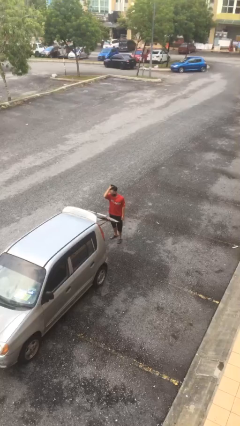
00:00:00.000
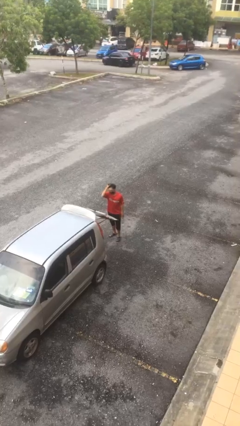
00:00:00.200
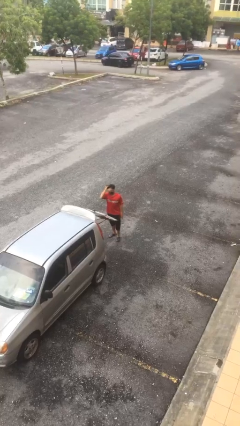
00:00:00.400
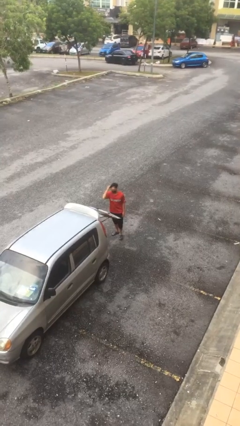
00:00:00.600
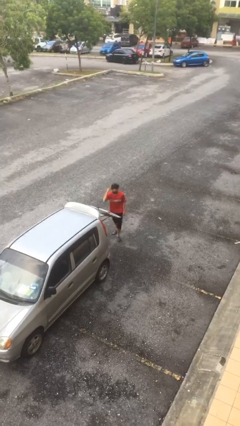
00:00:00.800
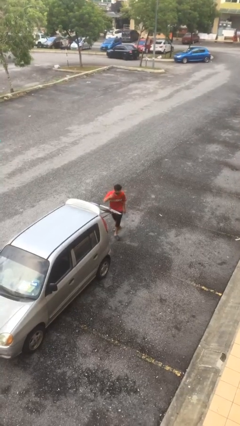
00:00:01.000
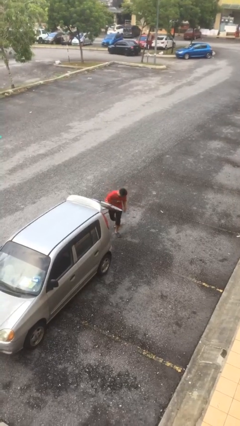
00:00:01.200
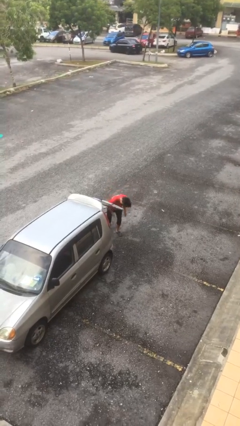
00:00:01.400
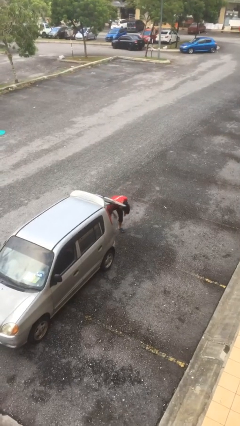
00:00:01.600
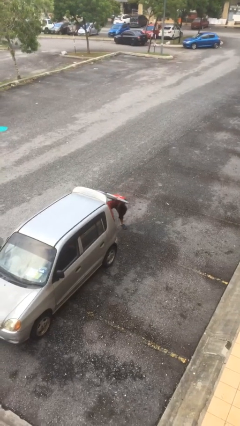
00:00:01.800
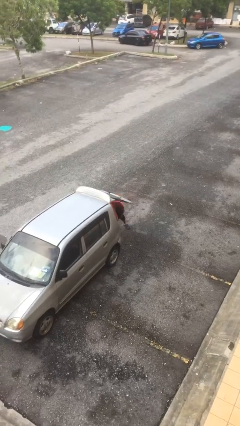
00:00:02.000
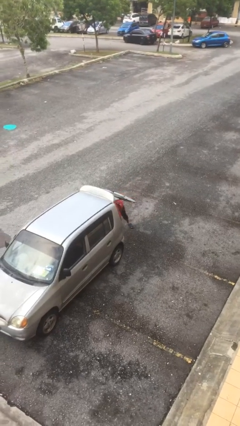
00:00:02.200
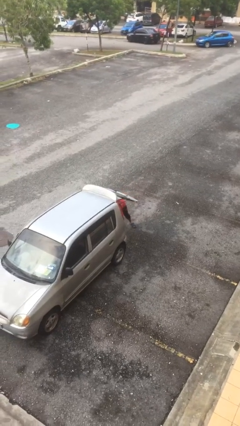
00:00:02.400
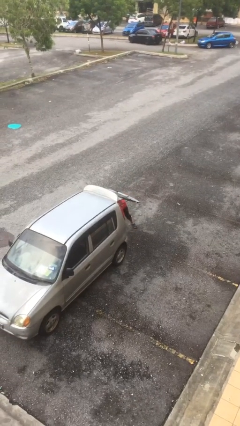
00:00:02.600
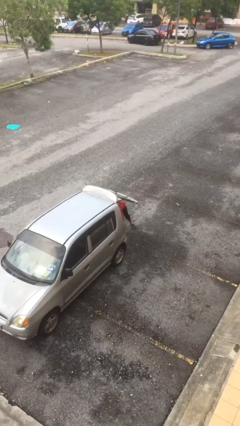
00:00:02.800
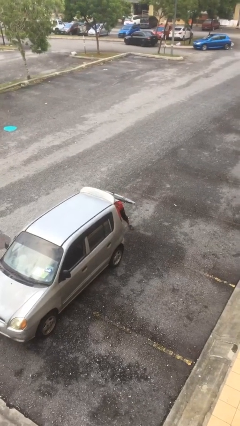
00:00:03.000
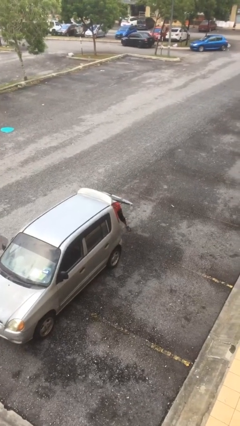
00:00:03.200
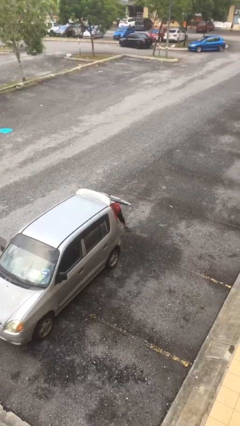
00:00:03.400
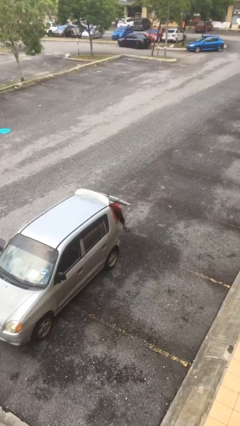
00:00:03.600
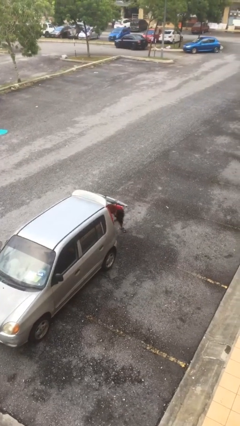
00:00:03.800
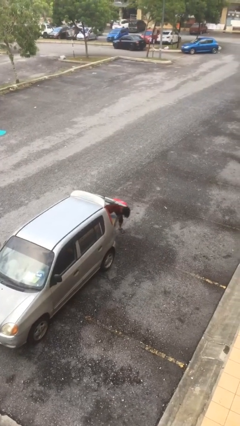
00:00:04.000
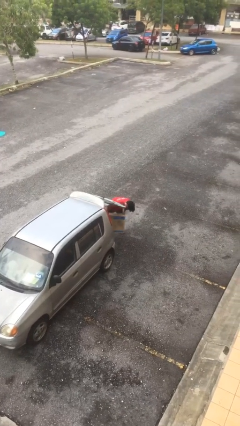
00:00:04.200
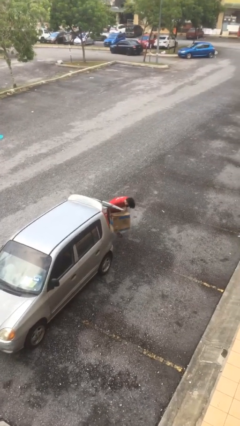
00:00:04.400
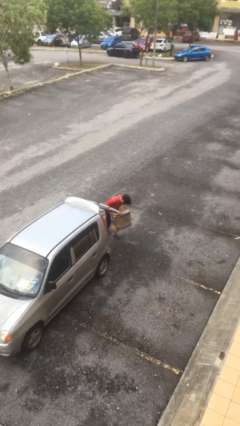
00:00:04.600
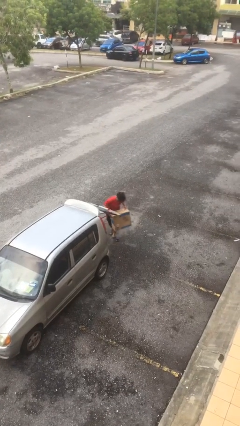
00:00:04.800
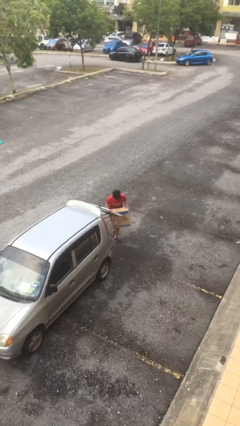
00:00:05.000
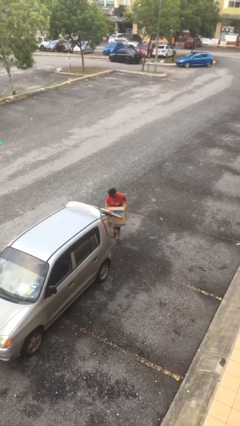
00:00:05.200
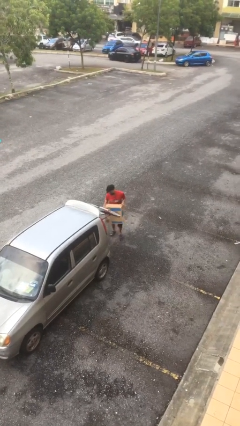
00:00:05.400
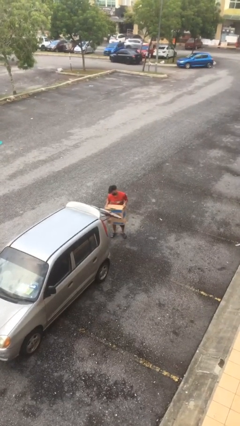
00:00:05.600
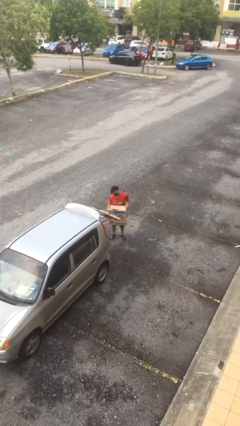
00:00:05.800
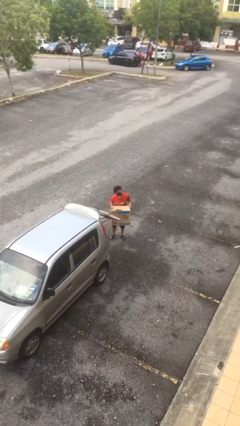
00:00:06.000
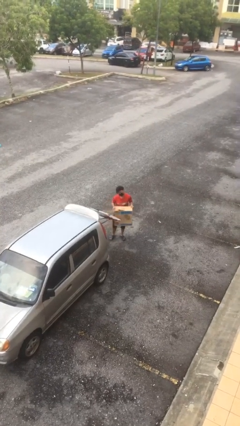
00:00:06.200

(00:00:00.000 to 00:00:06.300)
person unloads car

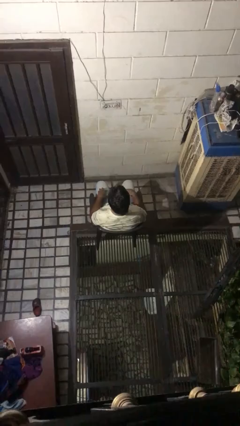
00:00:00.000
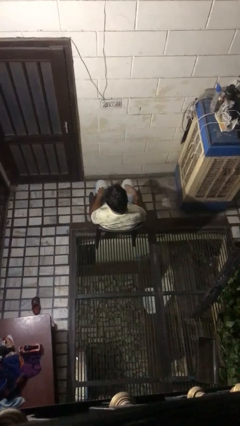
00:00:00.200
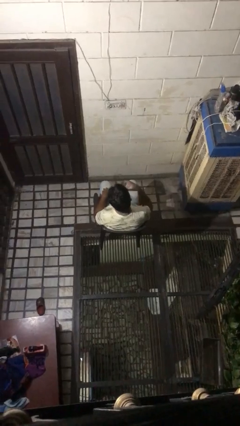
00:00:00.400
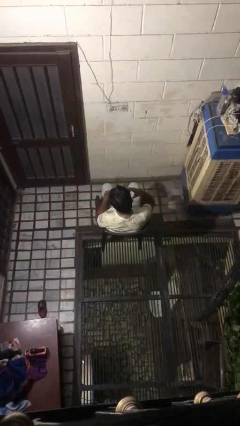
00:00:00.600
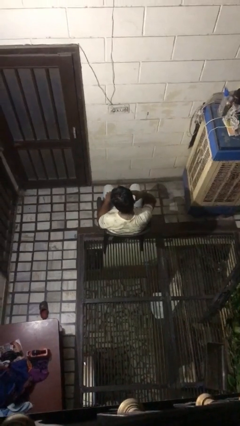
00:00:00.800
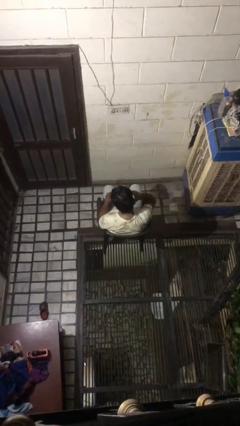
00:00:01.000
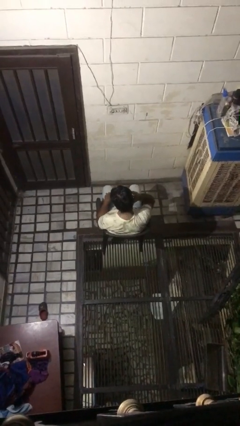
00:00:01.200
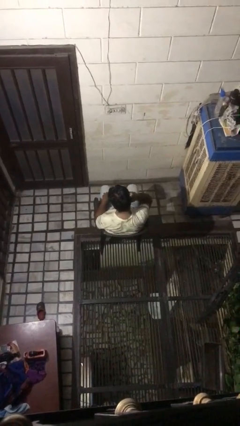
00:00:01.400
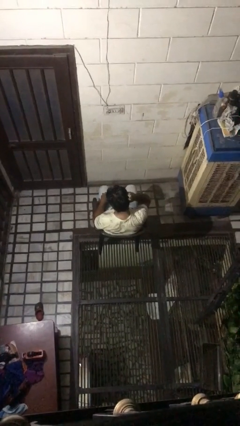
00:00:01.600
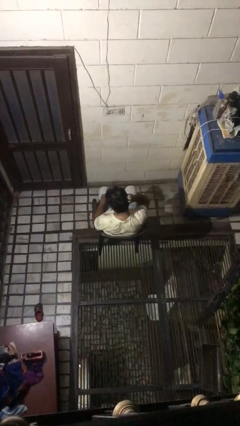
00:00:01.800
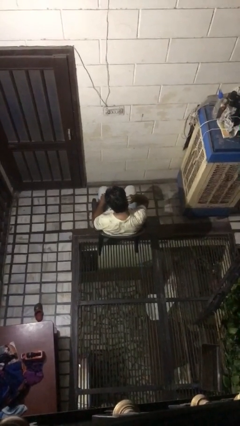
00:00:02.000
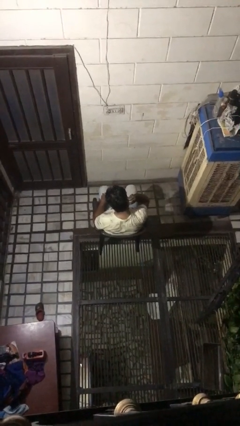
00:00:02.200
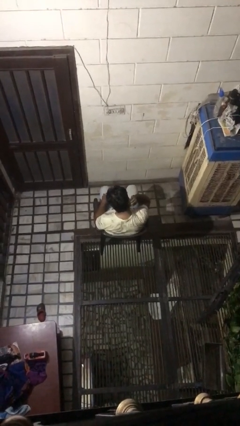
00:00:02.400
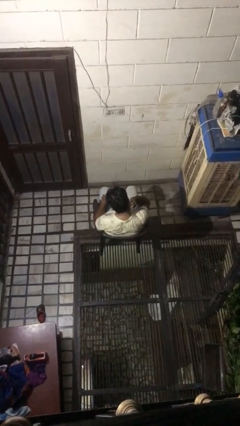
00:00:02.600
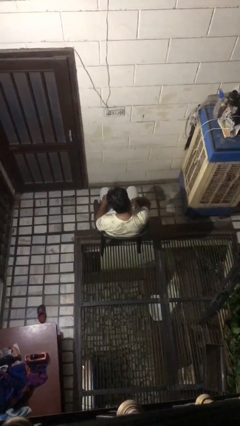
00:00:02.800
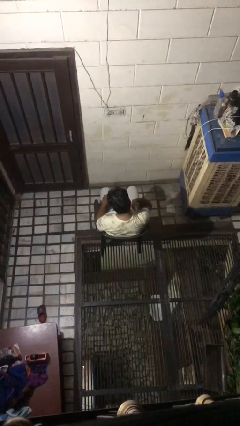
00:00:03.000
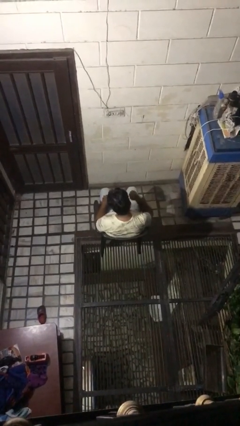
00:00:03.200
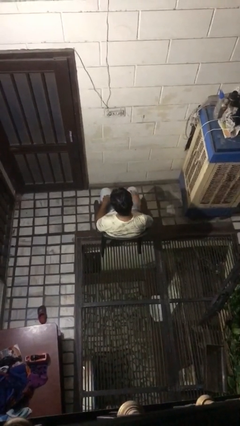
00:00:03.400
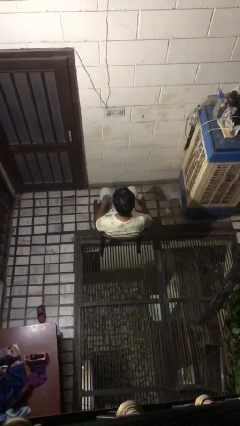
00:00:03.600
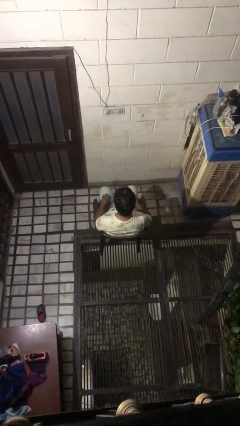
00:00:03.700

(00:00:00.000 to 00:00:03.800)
person strokes hair

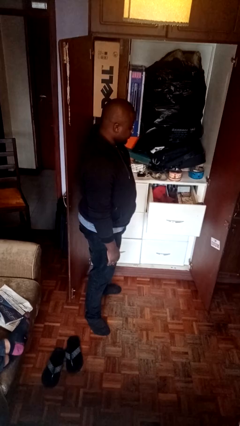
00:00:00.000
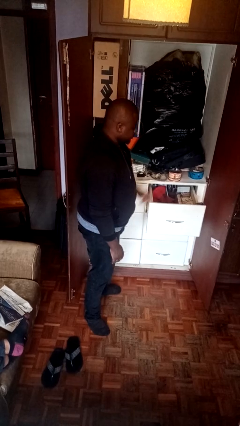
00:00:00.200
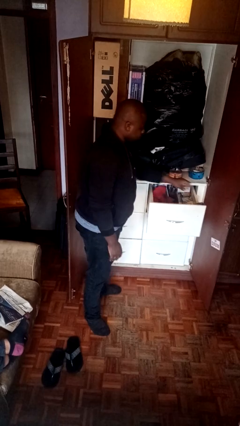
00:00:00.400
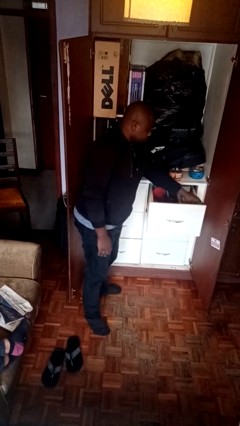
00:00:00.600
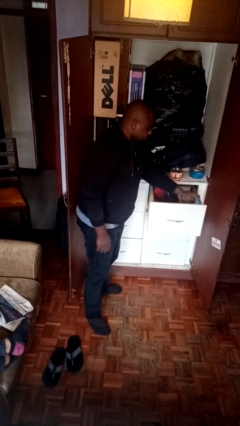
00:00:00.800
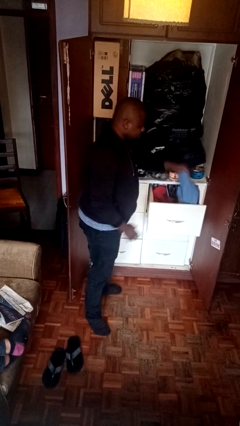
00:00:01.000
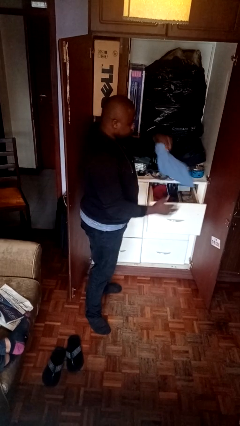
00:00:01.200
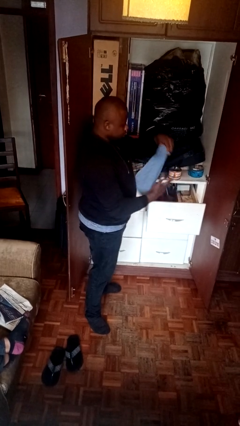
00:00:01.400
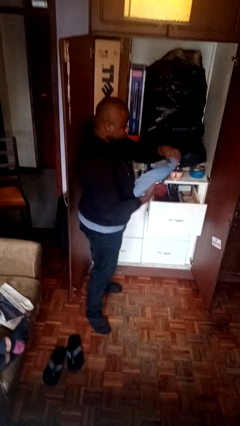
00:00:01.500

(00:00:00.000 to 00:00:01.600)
person takes clothes from dresser

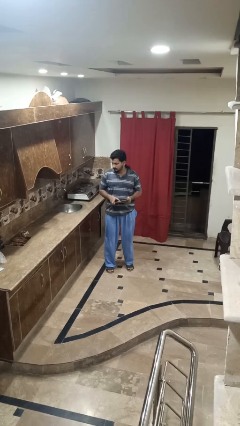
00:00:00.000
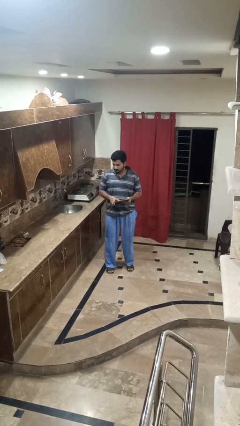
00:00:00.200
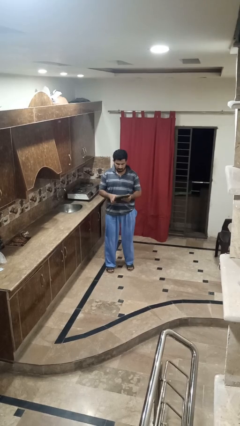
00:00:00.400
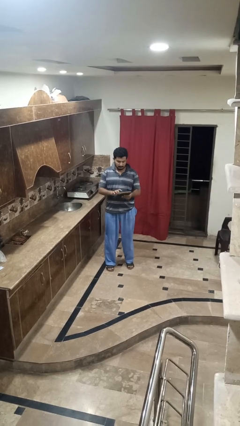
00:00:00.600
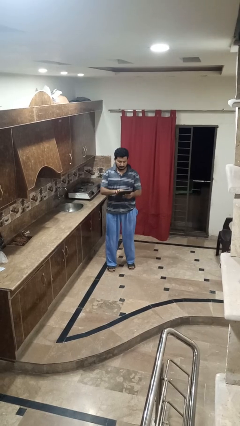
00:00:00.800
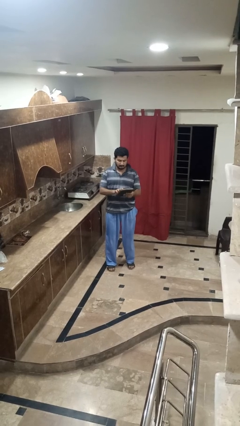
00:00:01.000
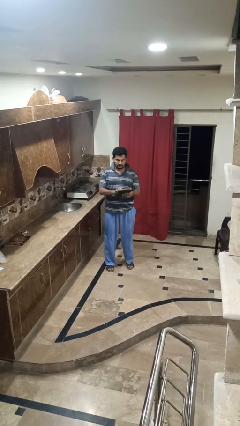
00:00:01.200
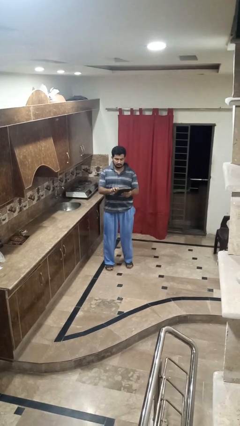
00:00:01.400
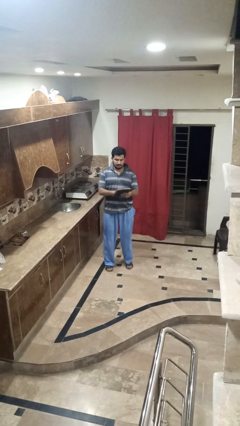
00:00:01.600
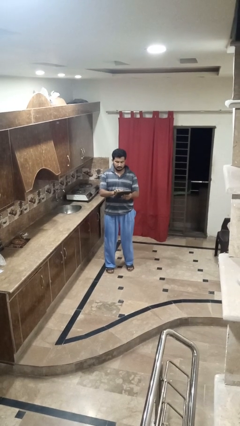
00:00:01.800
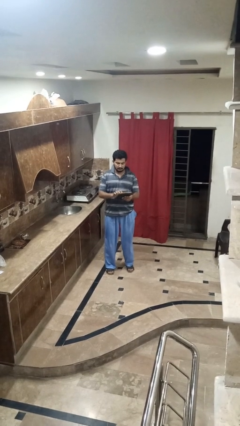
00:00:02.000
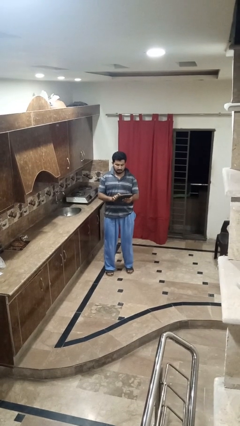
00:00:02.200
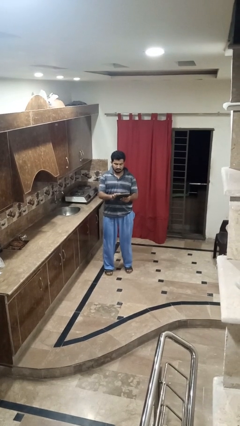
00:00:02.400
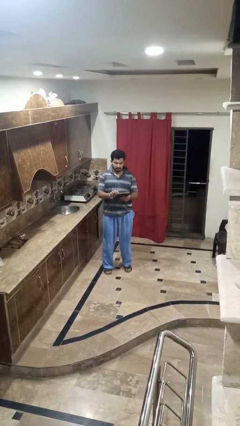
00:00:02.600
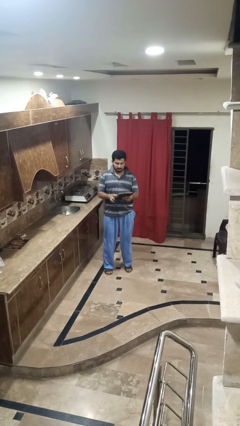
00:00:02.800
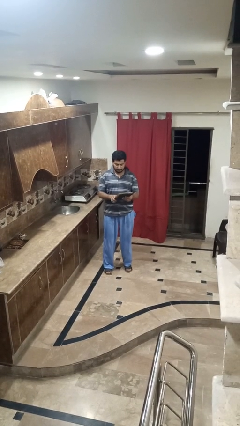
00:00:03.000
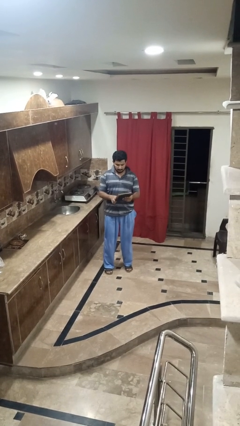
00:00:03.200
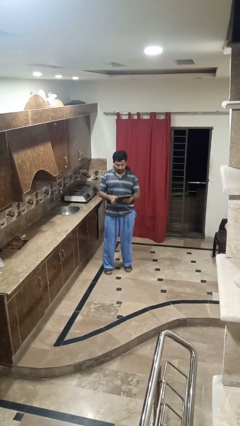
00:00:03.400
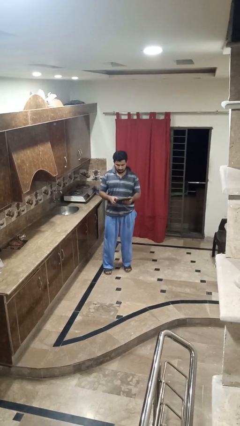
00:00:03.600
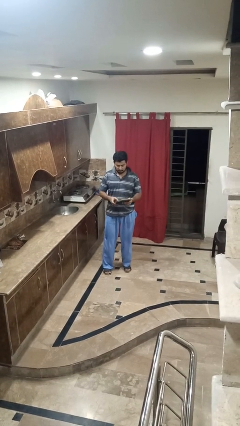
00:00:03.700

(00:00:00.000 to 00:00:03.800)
person interacts with tablet

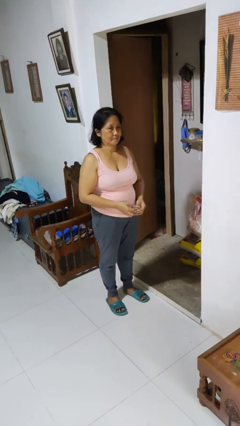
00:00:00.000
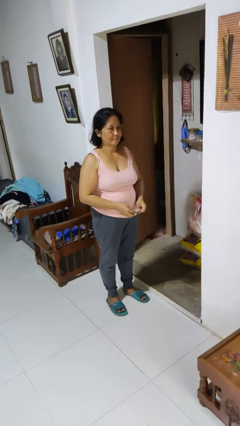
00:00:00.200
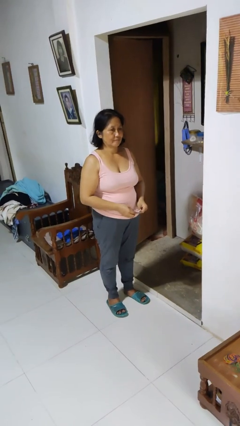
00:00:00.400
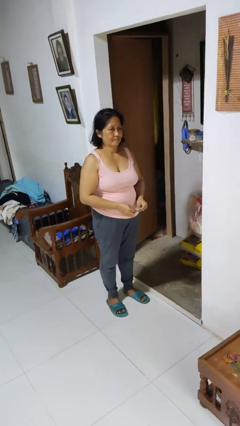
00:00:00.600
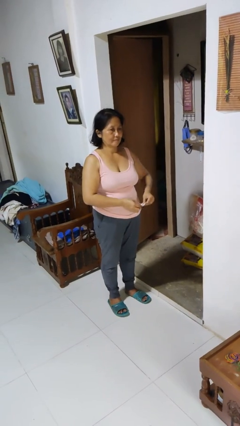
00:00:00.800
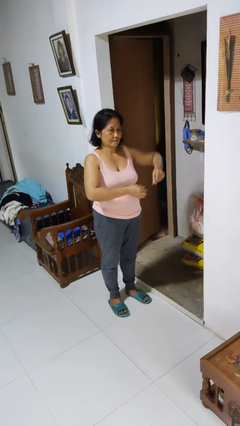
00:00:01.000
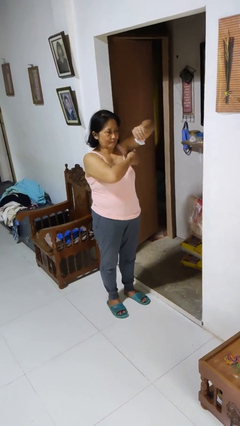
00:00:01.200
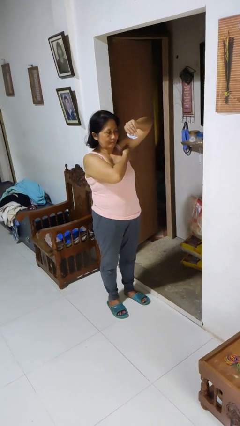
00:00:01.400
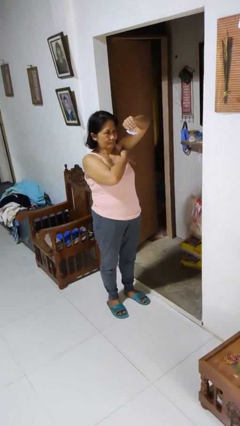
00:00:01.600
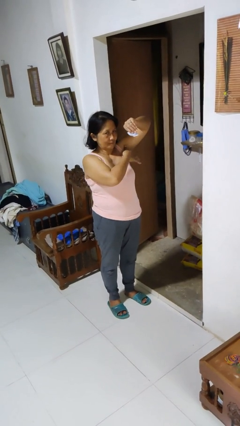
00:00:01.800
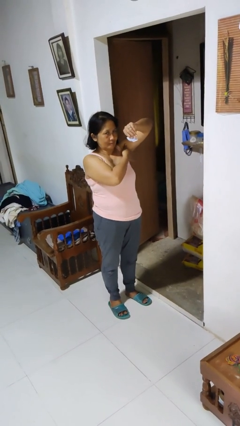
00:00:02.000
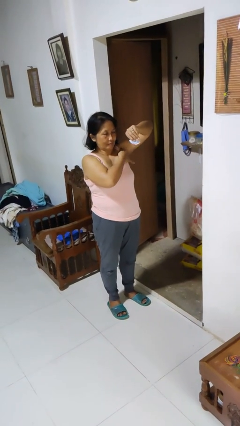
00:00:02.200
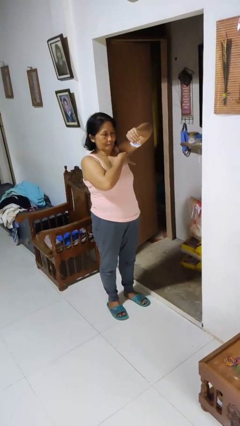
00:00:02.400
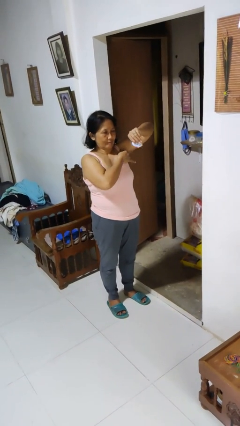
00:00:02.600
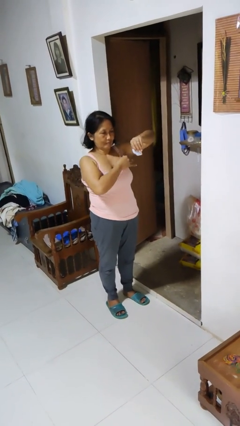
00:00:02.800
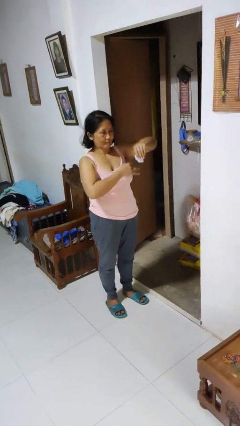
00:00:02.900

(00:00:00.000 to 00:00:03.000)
person applies deodorant
